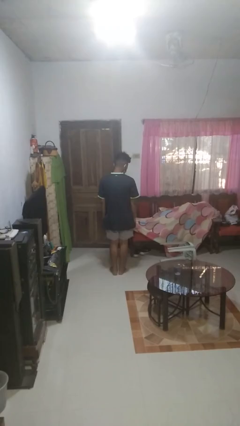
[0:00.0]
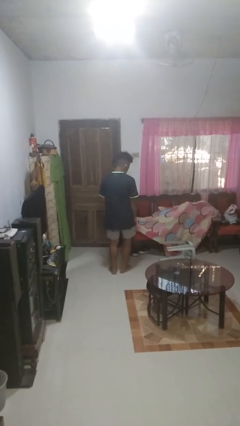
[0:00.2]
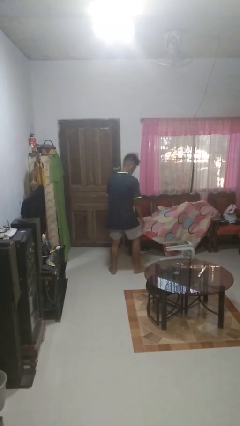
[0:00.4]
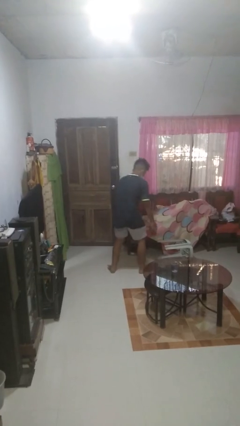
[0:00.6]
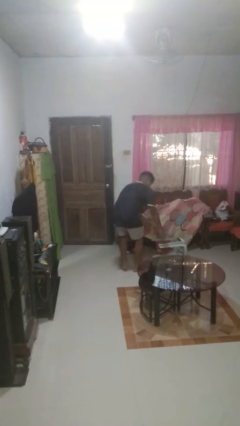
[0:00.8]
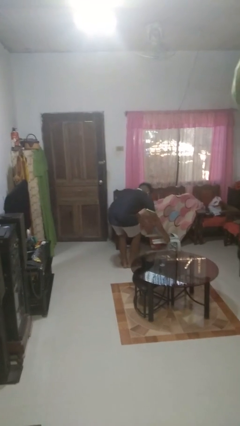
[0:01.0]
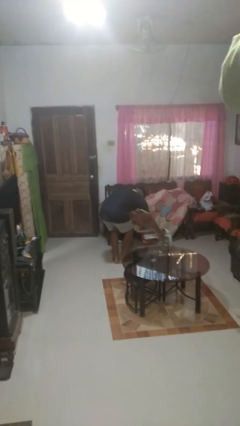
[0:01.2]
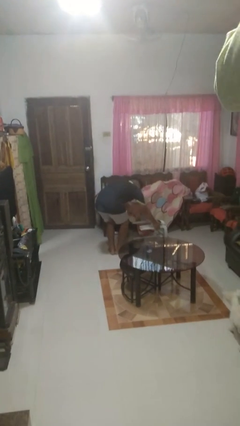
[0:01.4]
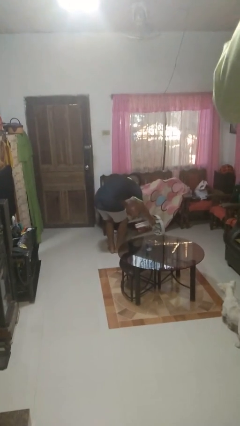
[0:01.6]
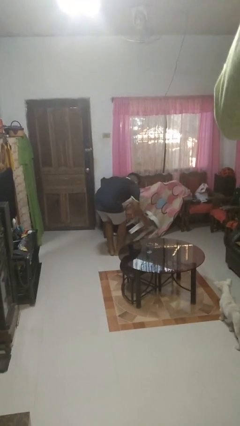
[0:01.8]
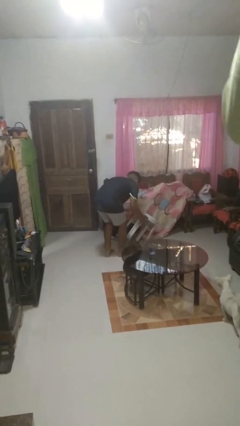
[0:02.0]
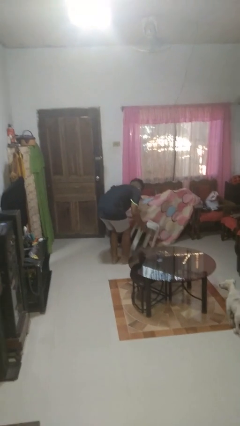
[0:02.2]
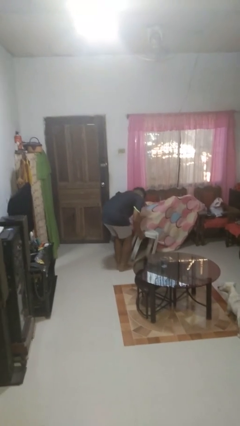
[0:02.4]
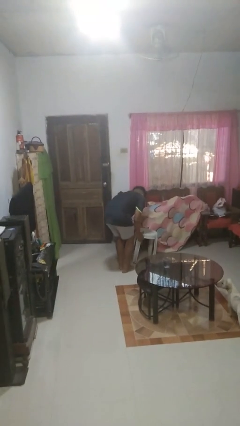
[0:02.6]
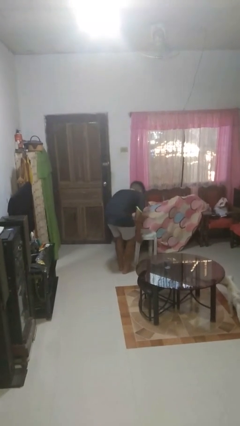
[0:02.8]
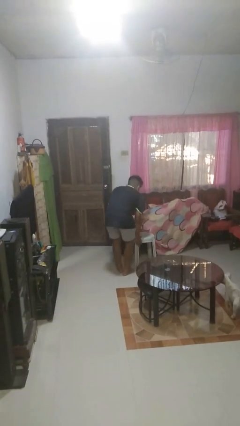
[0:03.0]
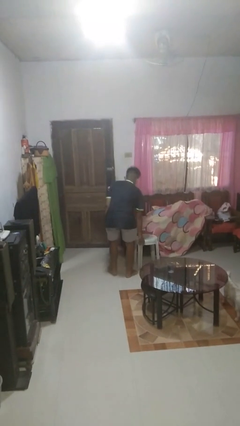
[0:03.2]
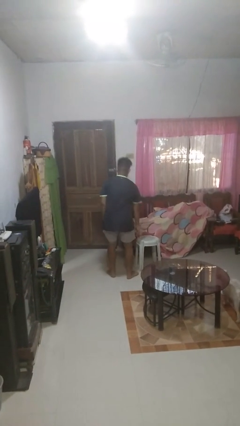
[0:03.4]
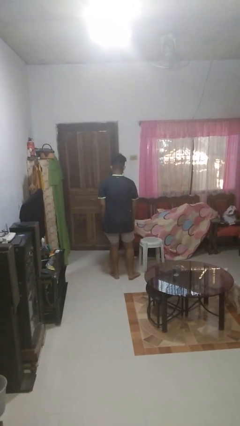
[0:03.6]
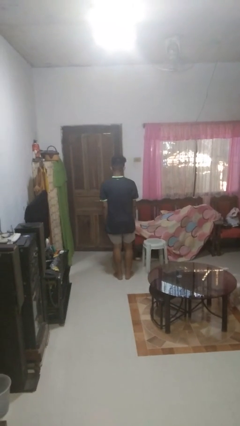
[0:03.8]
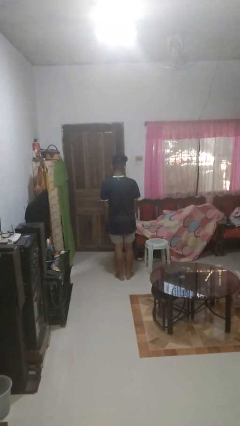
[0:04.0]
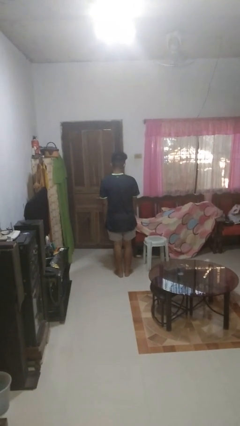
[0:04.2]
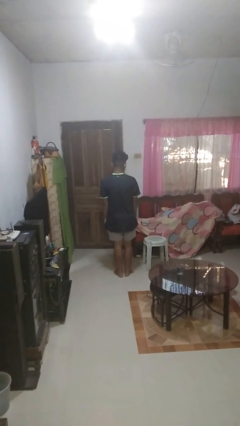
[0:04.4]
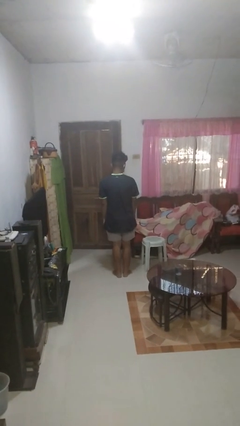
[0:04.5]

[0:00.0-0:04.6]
person sets upright furniture

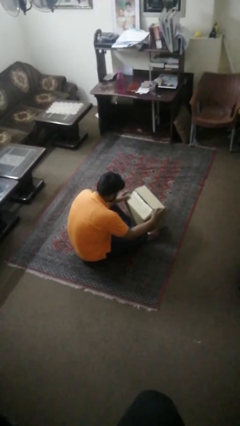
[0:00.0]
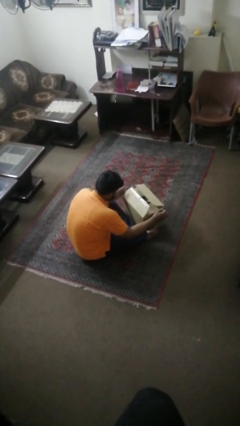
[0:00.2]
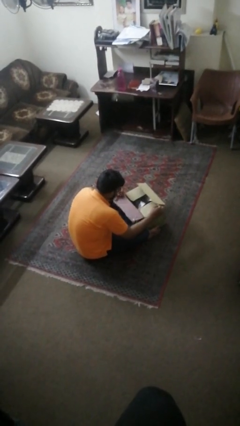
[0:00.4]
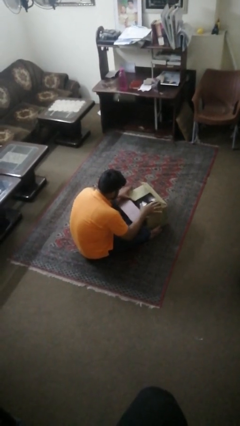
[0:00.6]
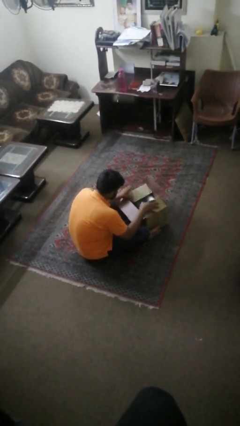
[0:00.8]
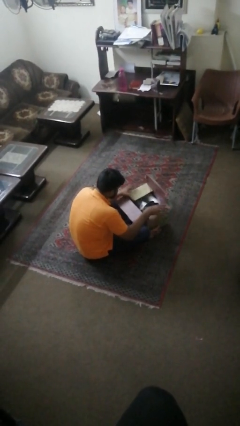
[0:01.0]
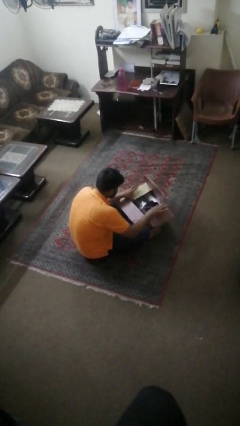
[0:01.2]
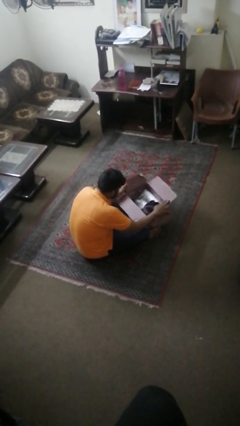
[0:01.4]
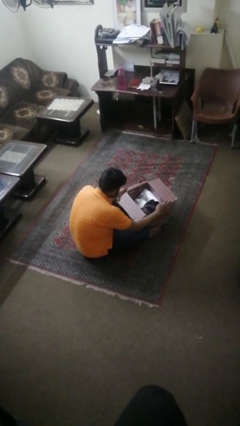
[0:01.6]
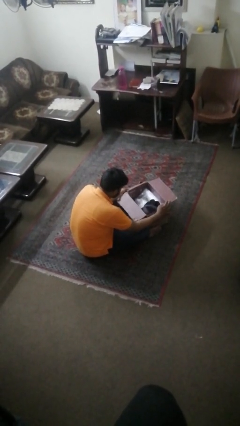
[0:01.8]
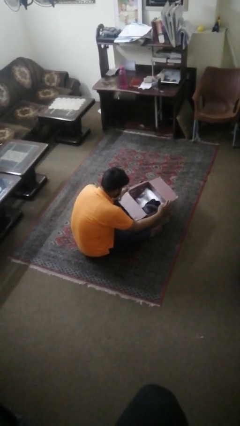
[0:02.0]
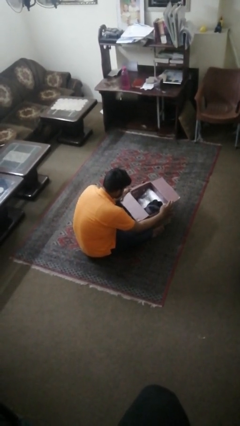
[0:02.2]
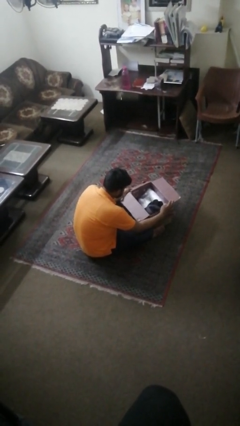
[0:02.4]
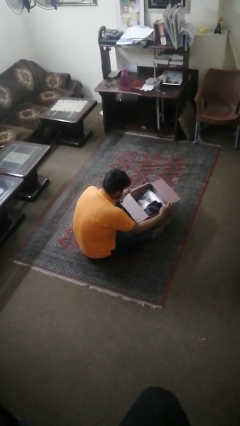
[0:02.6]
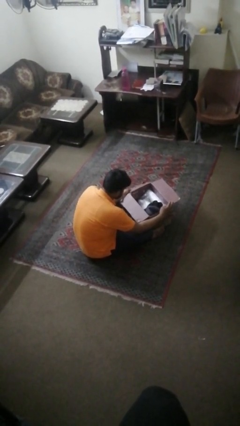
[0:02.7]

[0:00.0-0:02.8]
person opens box

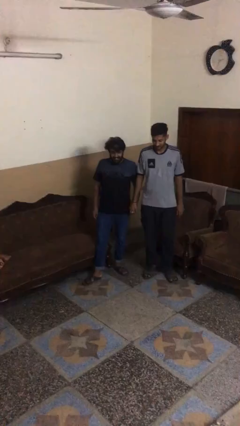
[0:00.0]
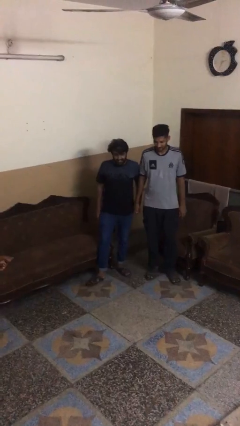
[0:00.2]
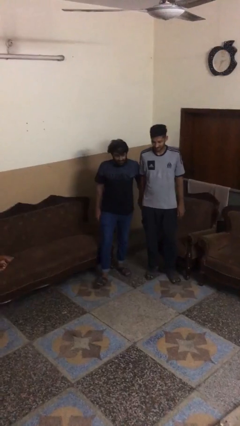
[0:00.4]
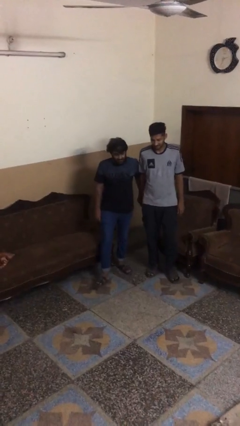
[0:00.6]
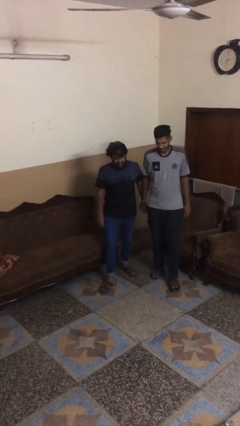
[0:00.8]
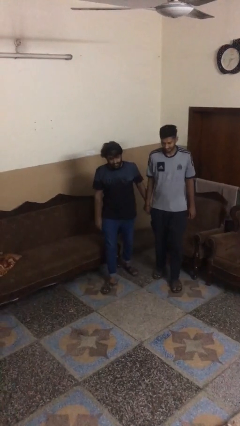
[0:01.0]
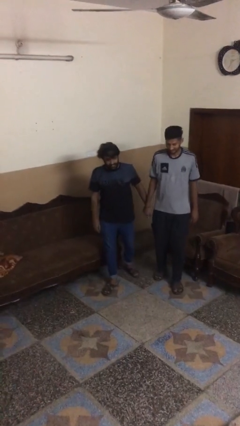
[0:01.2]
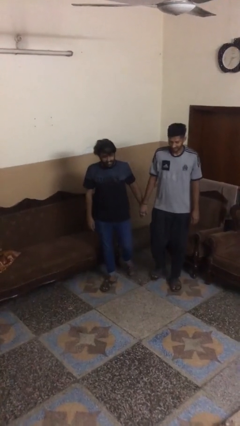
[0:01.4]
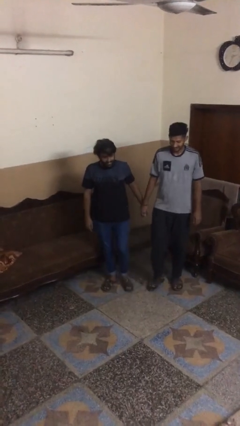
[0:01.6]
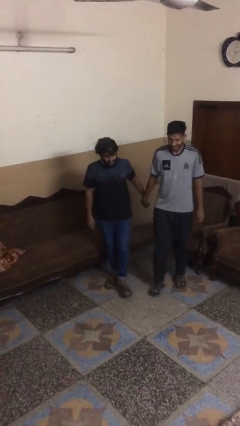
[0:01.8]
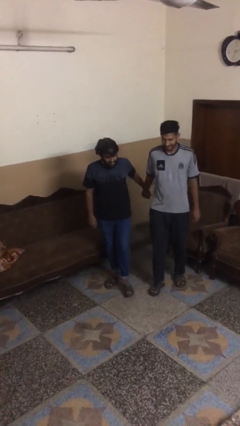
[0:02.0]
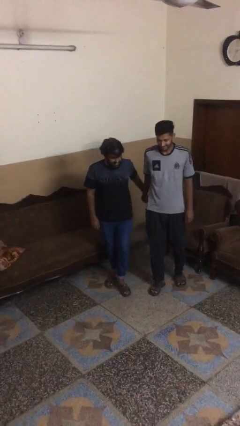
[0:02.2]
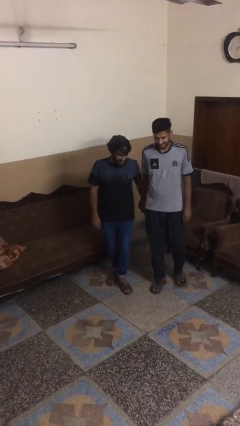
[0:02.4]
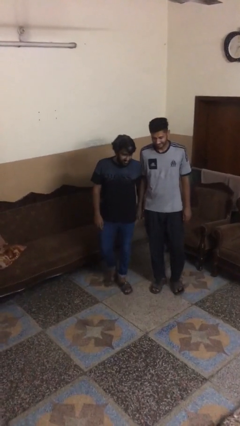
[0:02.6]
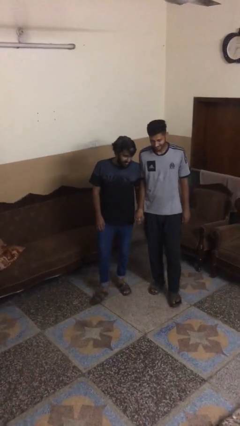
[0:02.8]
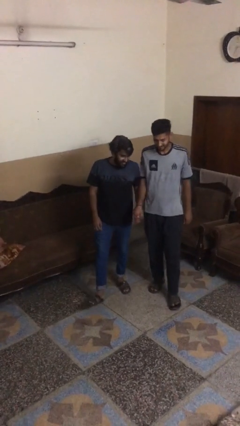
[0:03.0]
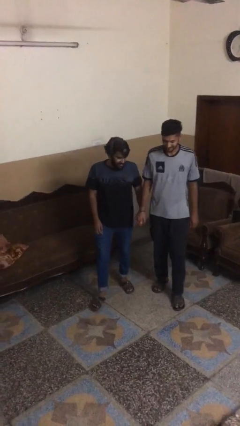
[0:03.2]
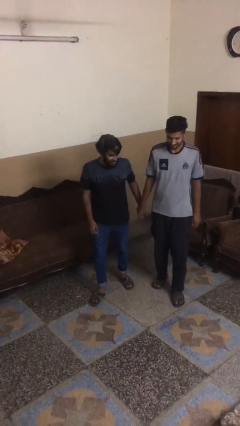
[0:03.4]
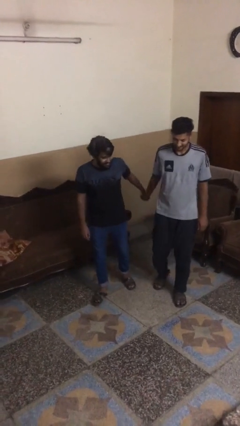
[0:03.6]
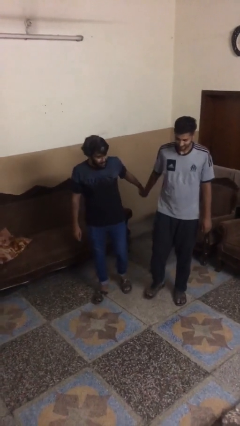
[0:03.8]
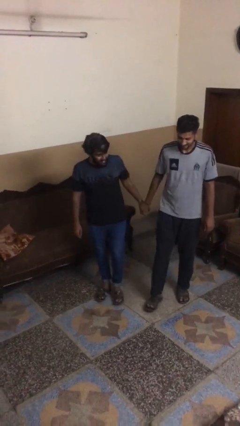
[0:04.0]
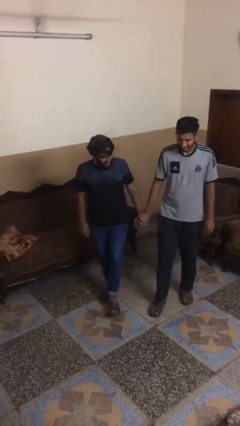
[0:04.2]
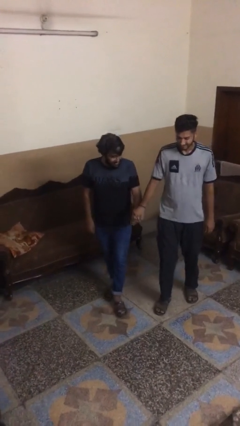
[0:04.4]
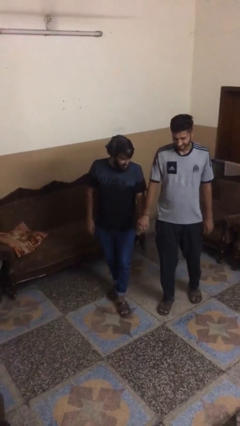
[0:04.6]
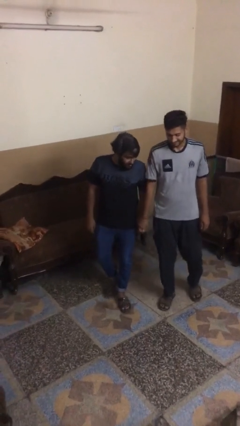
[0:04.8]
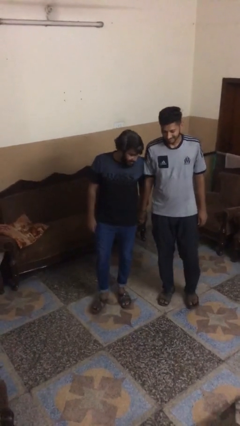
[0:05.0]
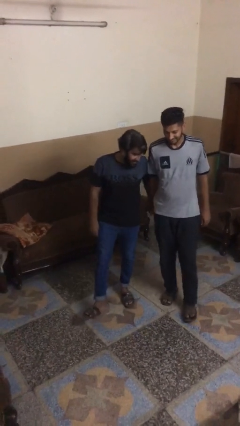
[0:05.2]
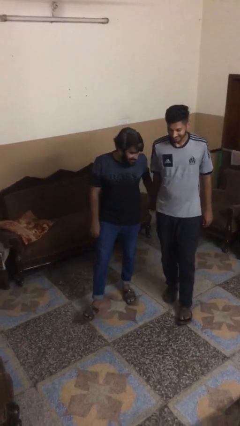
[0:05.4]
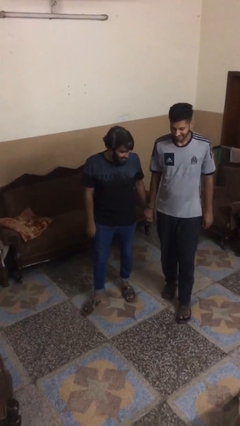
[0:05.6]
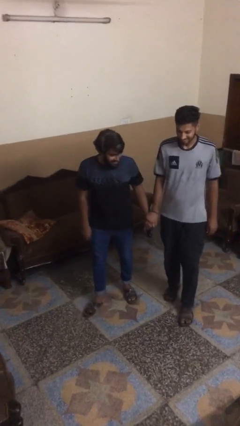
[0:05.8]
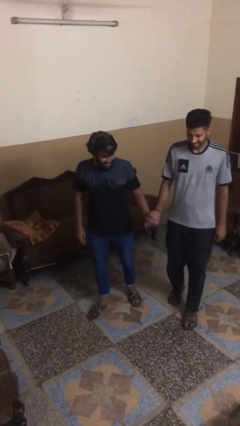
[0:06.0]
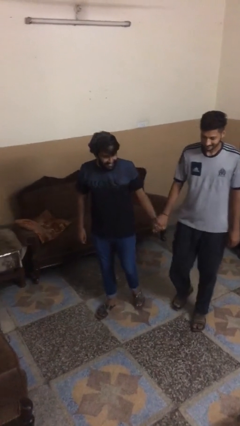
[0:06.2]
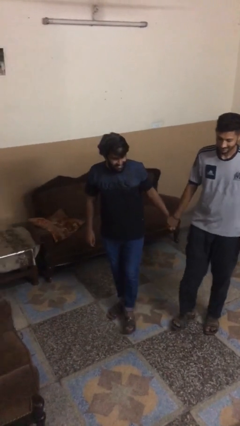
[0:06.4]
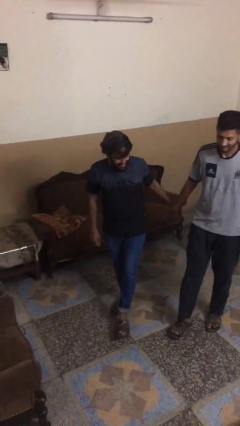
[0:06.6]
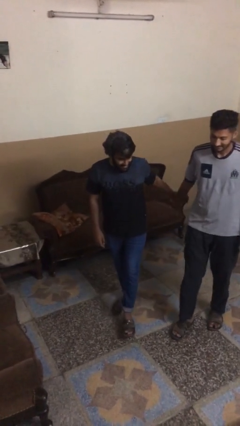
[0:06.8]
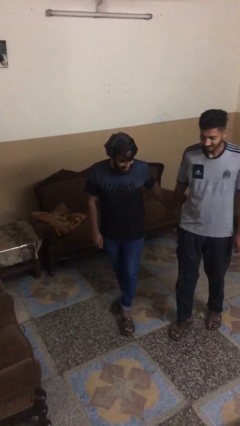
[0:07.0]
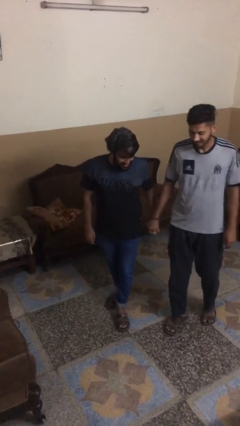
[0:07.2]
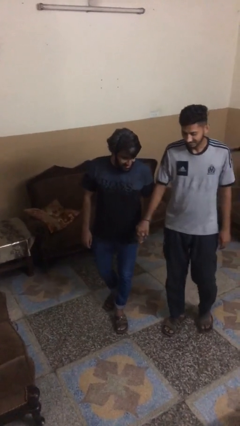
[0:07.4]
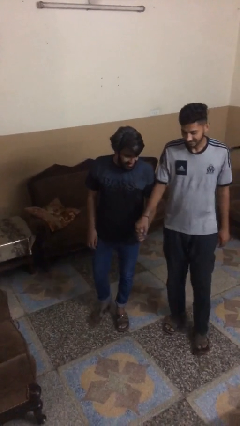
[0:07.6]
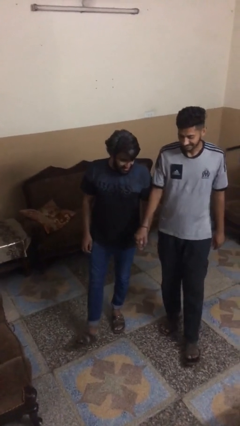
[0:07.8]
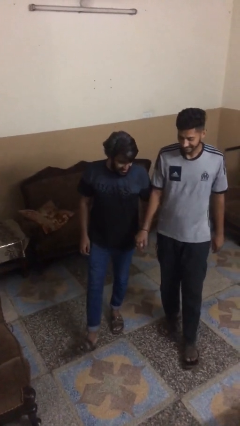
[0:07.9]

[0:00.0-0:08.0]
person holds hand

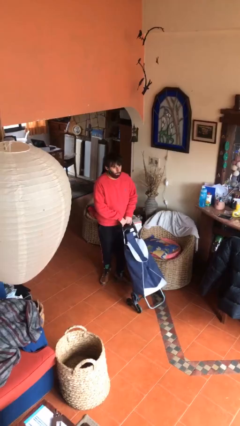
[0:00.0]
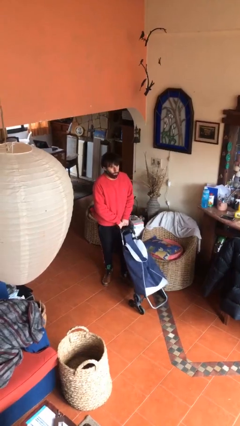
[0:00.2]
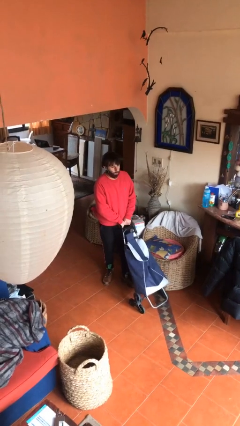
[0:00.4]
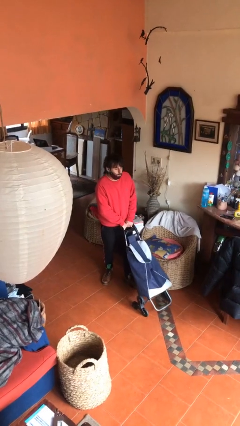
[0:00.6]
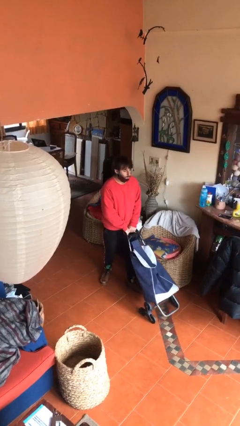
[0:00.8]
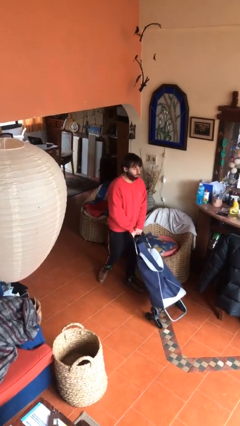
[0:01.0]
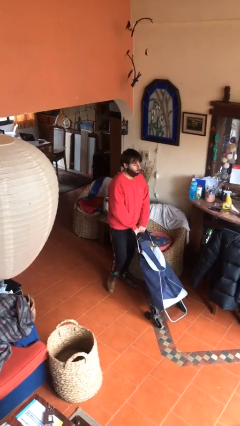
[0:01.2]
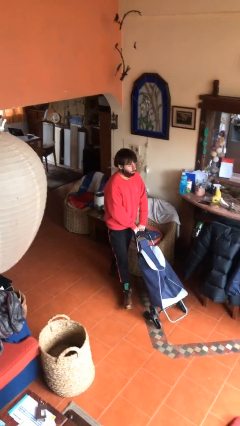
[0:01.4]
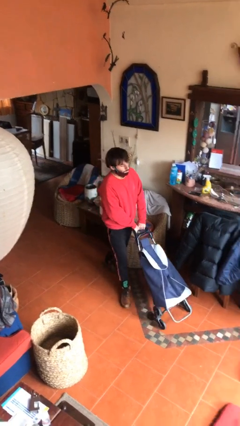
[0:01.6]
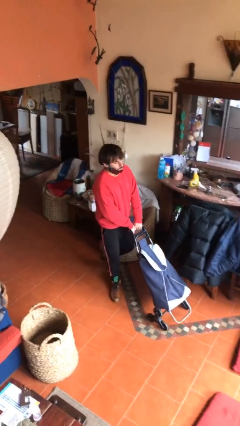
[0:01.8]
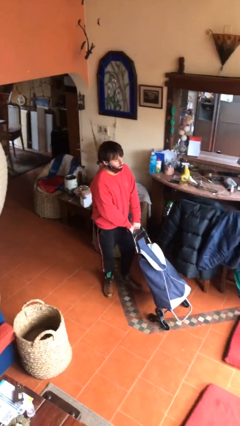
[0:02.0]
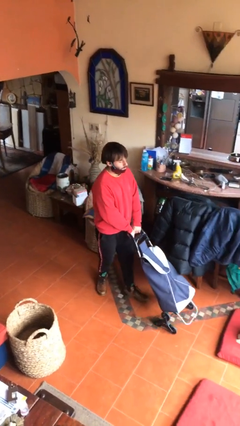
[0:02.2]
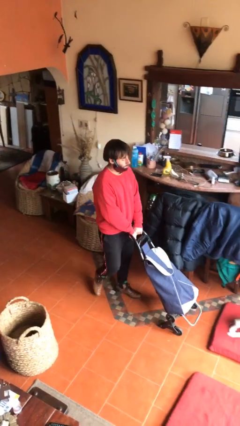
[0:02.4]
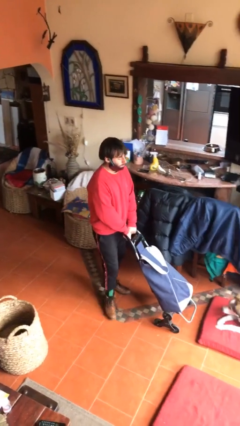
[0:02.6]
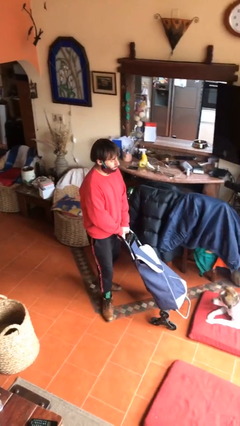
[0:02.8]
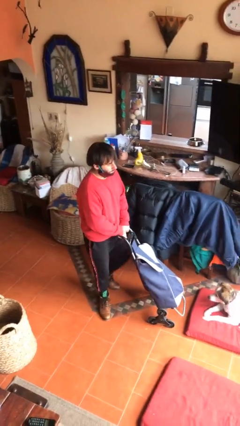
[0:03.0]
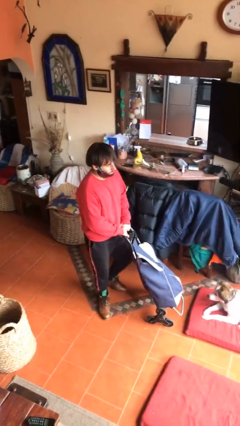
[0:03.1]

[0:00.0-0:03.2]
person pushes wheeled cart
